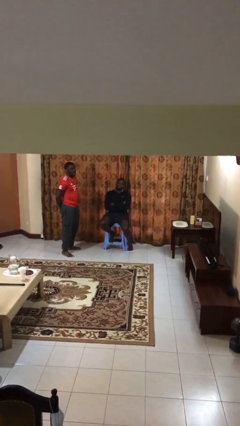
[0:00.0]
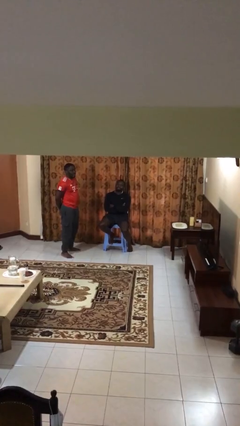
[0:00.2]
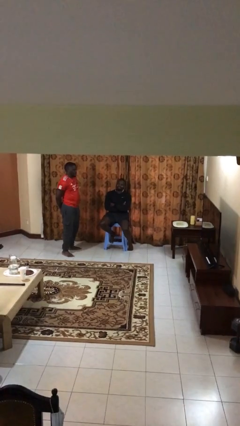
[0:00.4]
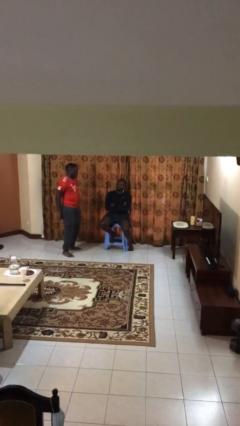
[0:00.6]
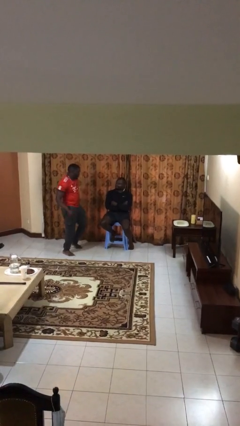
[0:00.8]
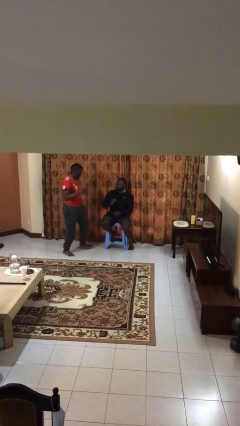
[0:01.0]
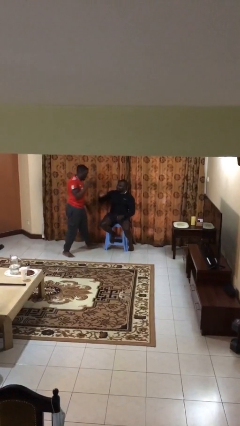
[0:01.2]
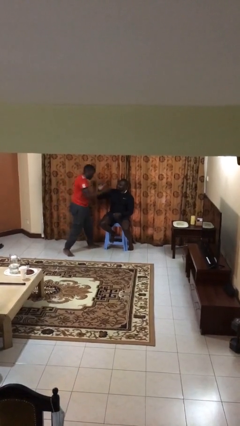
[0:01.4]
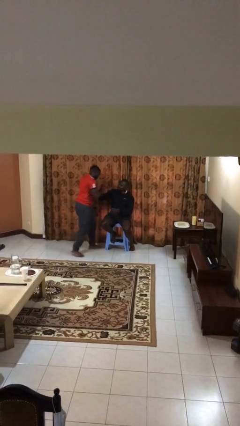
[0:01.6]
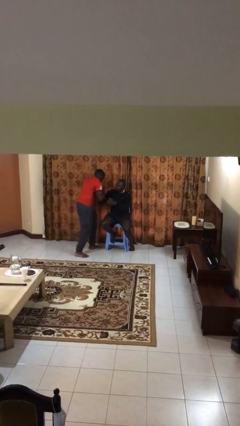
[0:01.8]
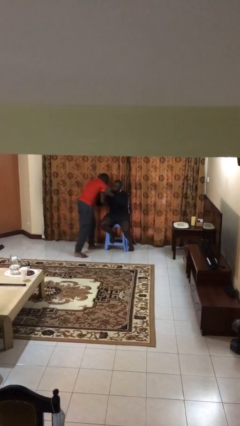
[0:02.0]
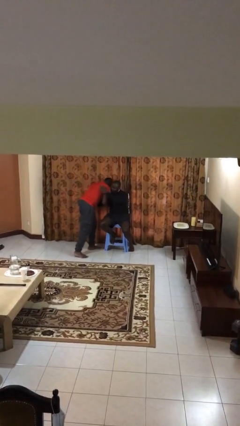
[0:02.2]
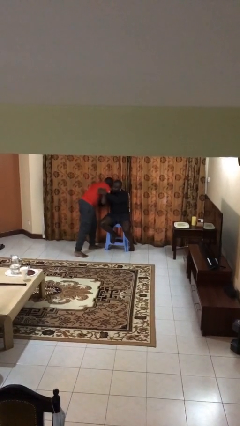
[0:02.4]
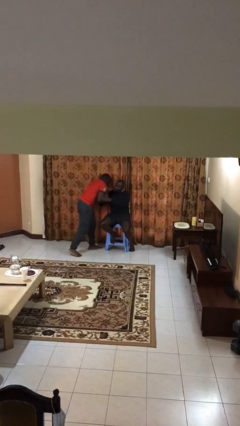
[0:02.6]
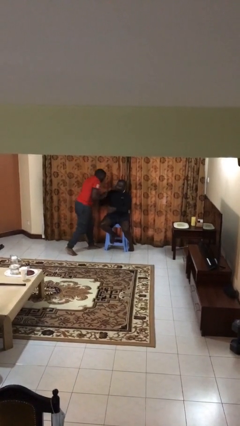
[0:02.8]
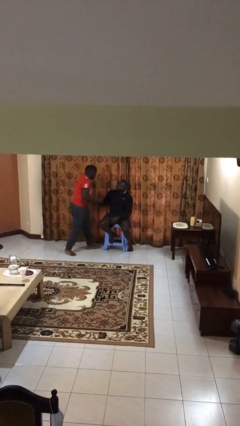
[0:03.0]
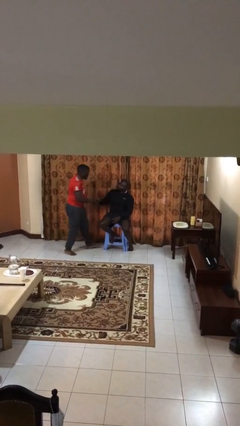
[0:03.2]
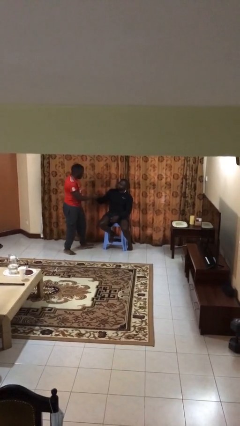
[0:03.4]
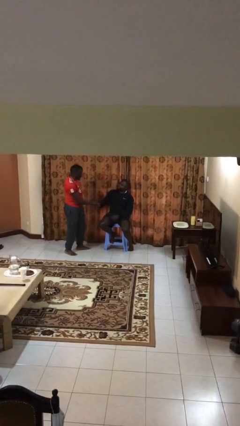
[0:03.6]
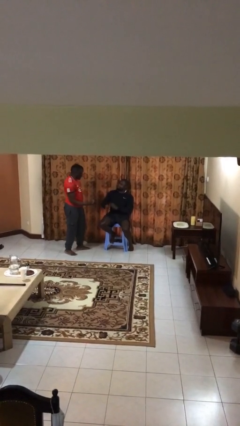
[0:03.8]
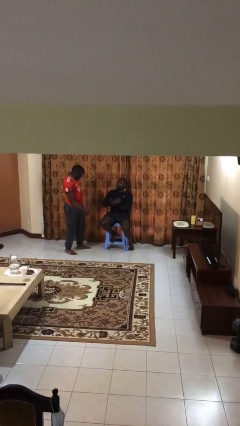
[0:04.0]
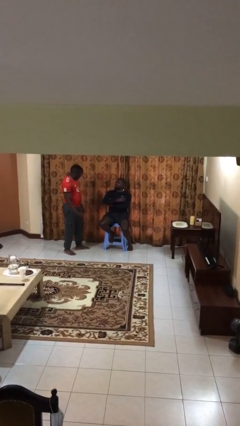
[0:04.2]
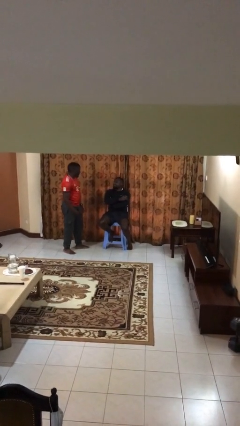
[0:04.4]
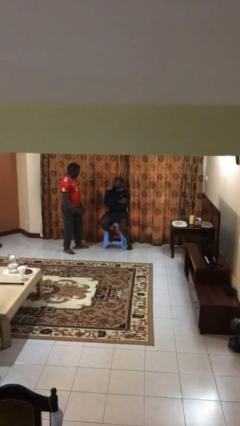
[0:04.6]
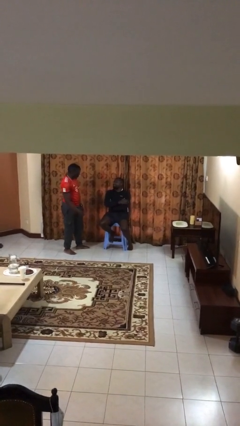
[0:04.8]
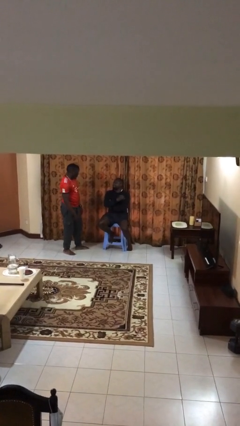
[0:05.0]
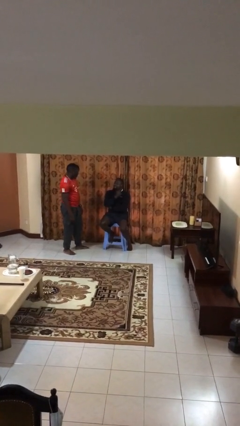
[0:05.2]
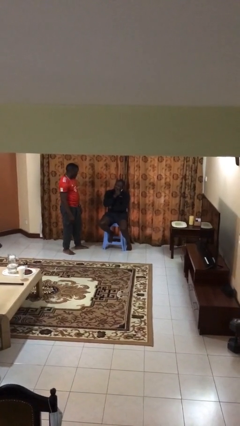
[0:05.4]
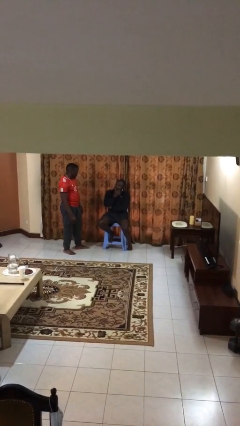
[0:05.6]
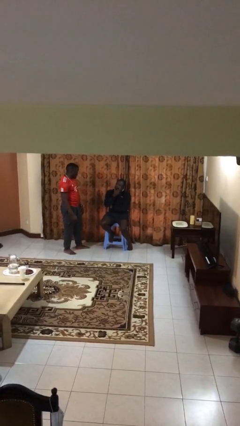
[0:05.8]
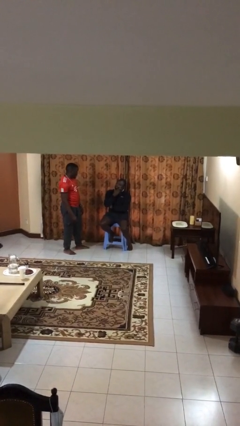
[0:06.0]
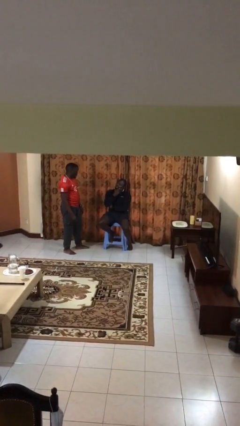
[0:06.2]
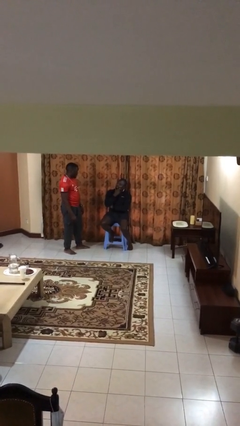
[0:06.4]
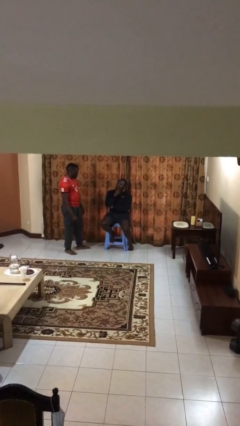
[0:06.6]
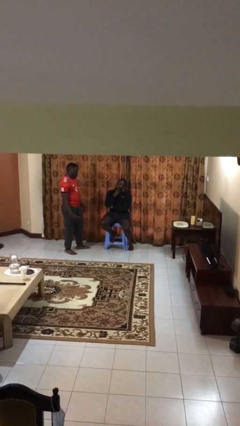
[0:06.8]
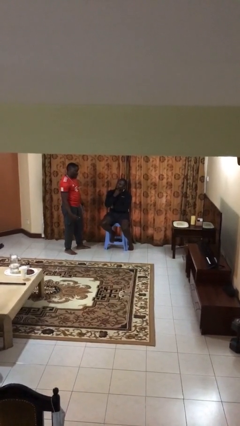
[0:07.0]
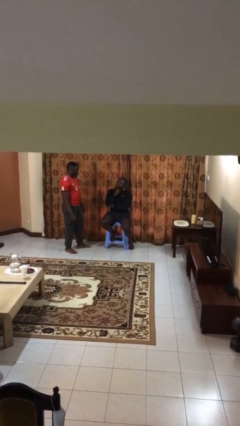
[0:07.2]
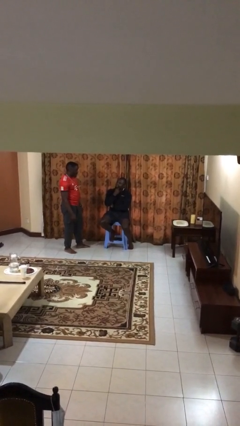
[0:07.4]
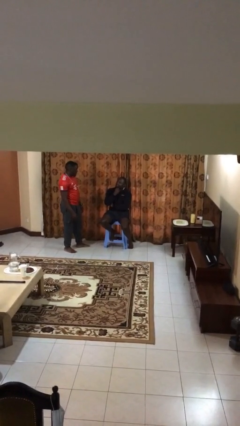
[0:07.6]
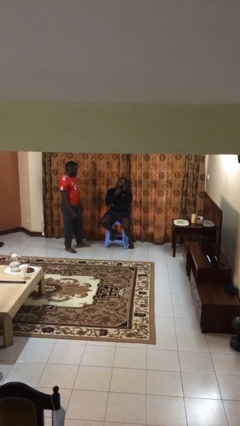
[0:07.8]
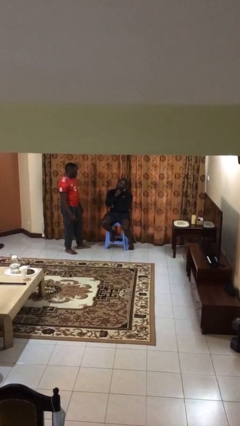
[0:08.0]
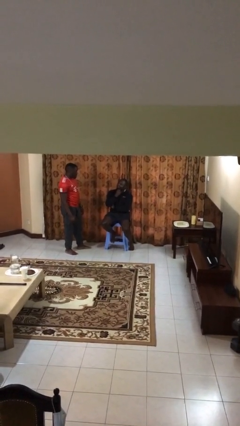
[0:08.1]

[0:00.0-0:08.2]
person embraces person

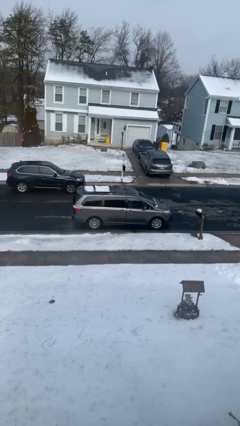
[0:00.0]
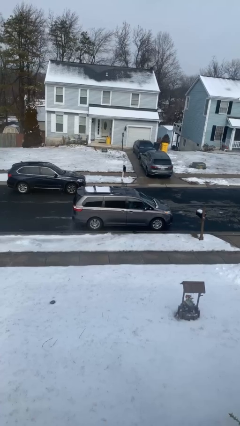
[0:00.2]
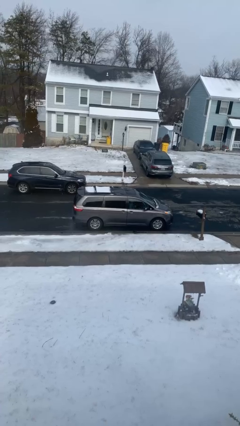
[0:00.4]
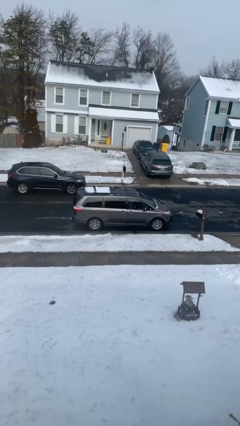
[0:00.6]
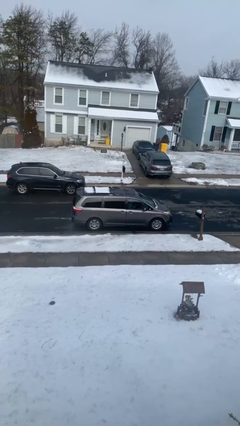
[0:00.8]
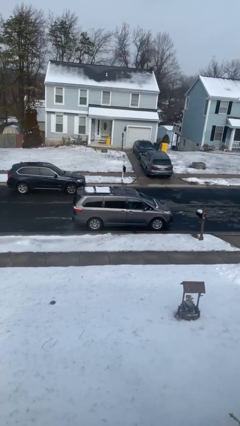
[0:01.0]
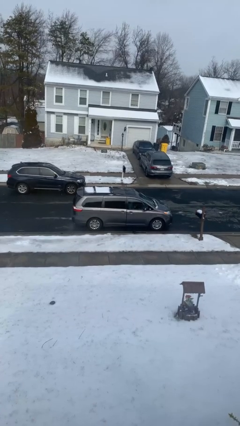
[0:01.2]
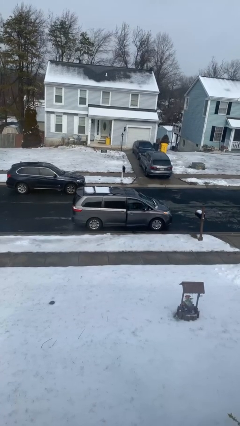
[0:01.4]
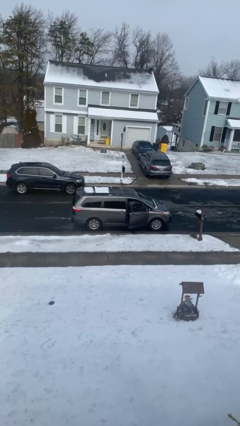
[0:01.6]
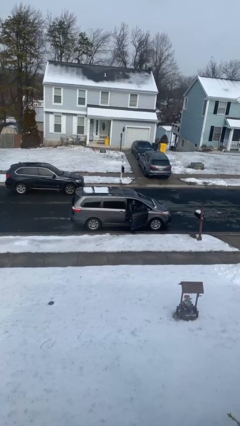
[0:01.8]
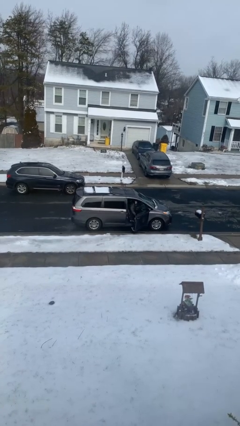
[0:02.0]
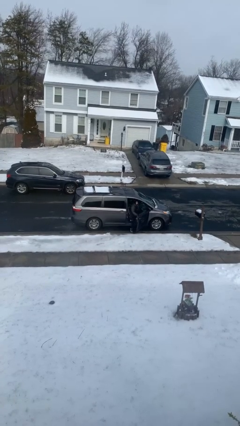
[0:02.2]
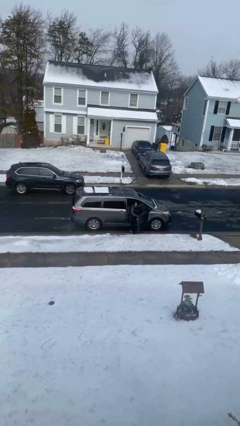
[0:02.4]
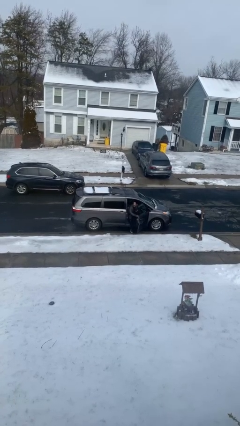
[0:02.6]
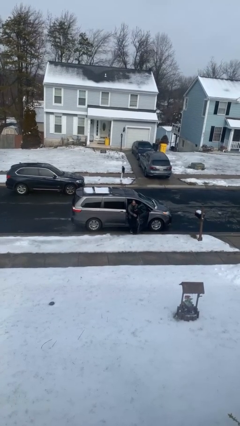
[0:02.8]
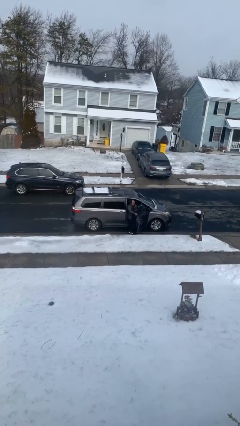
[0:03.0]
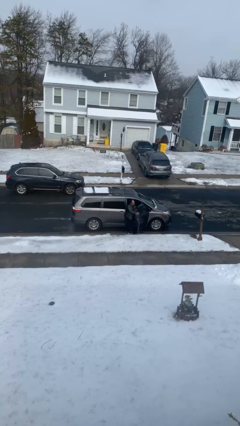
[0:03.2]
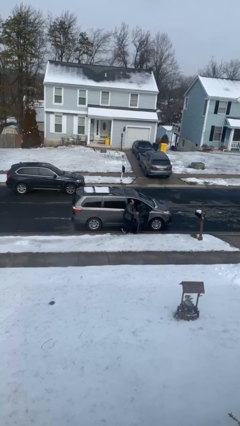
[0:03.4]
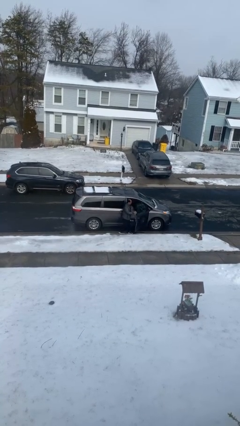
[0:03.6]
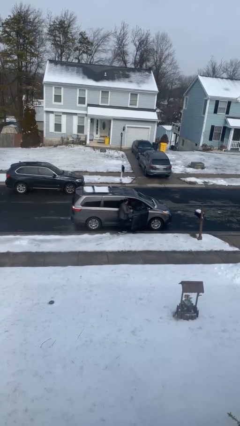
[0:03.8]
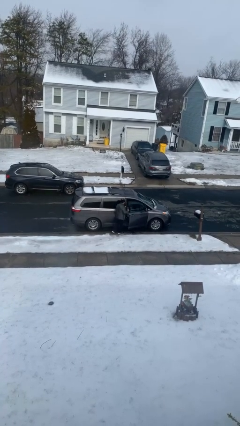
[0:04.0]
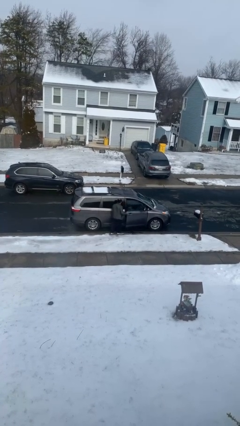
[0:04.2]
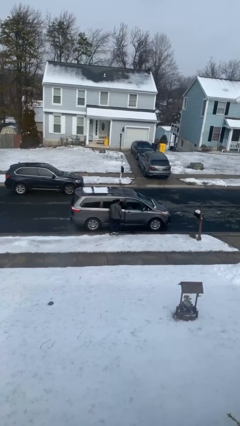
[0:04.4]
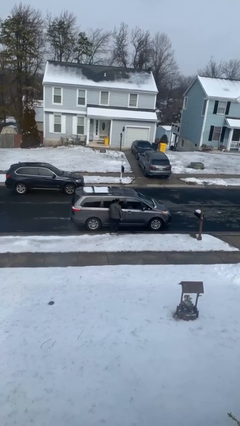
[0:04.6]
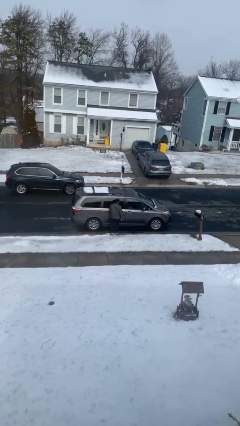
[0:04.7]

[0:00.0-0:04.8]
car drops off person

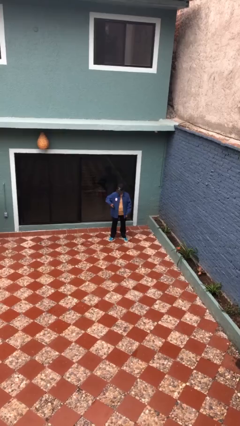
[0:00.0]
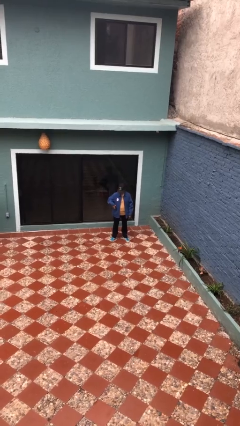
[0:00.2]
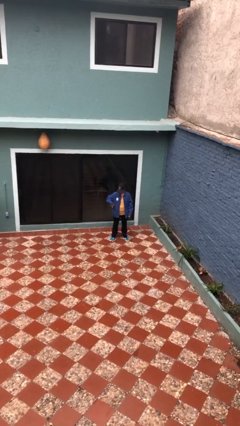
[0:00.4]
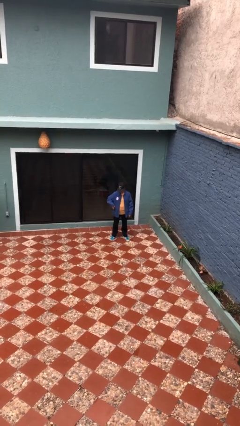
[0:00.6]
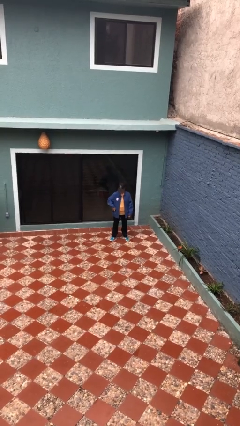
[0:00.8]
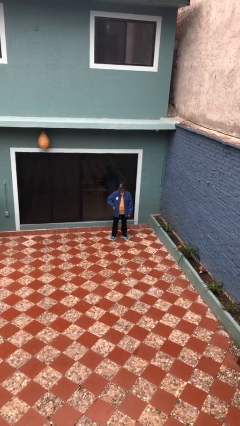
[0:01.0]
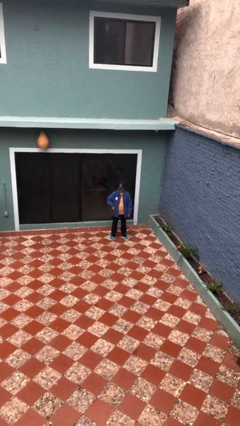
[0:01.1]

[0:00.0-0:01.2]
person puts phone into pocket

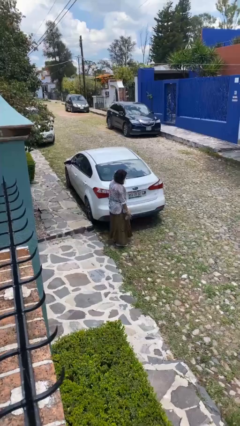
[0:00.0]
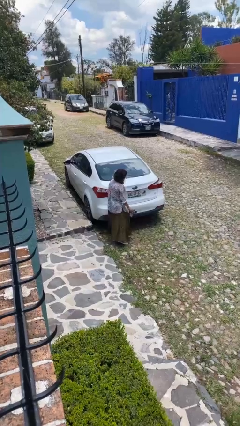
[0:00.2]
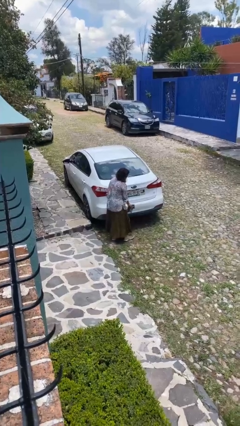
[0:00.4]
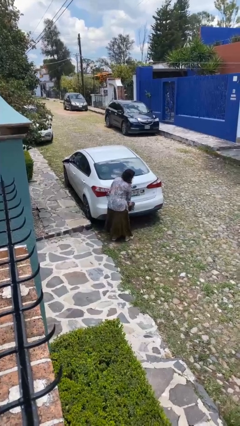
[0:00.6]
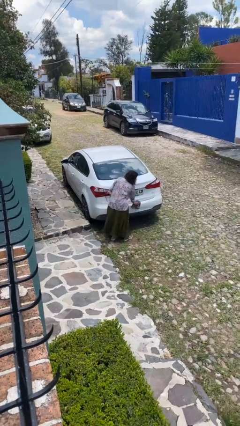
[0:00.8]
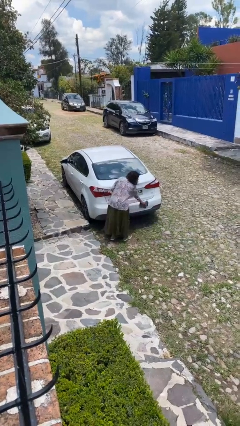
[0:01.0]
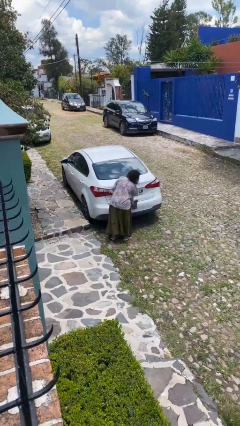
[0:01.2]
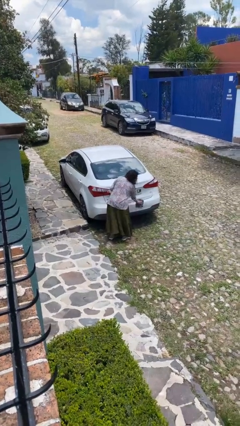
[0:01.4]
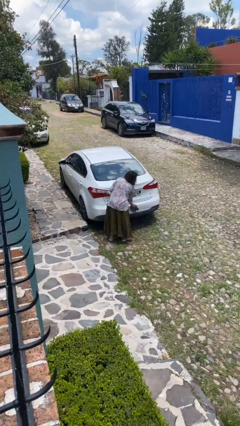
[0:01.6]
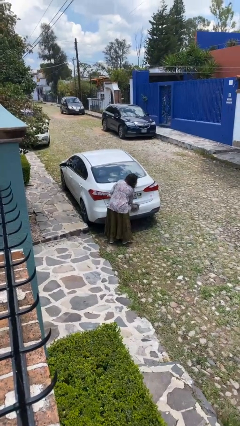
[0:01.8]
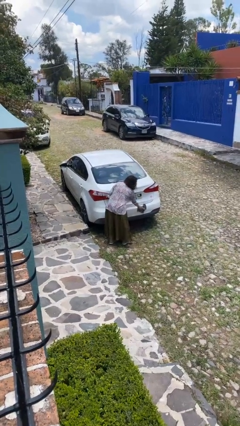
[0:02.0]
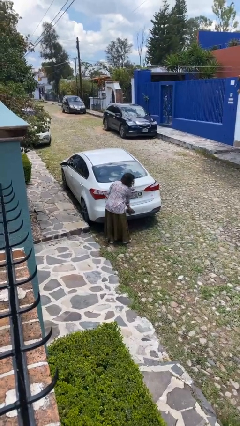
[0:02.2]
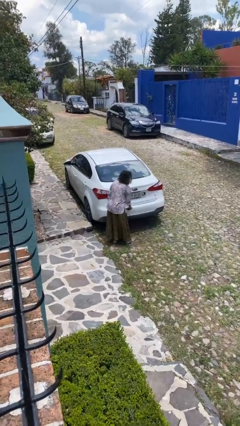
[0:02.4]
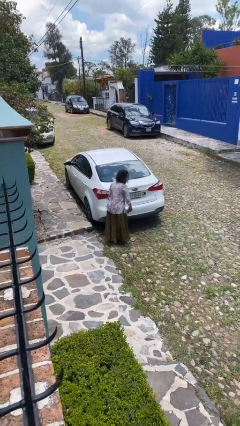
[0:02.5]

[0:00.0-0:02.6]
person polishes car with rag

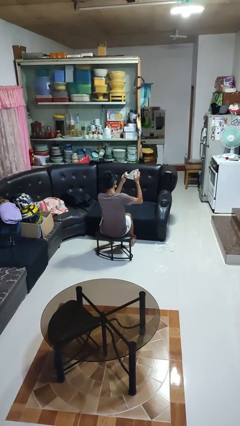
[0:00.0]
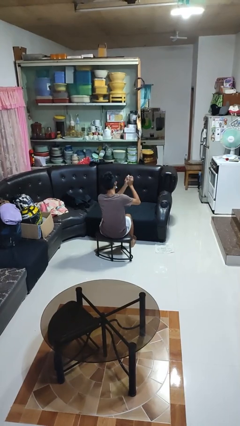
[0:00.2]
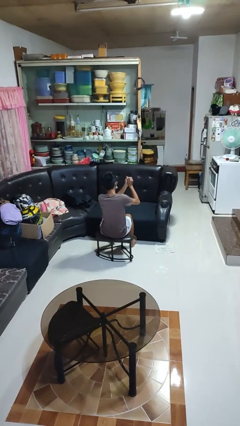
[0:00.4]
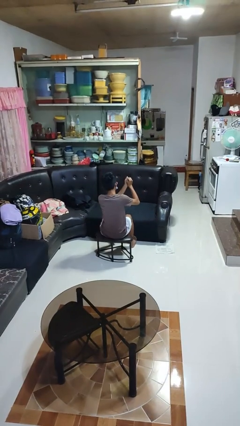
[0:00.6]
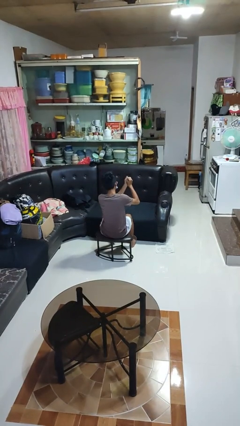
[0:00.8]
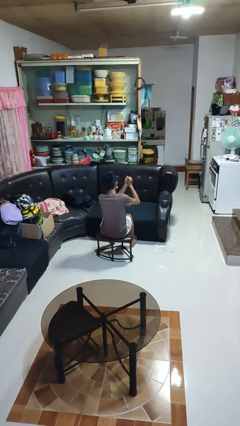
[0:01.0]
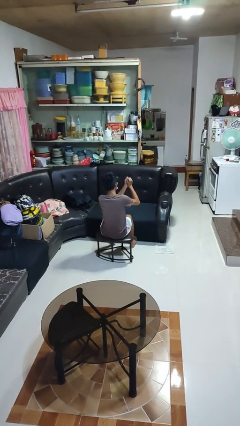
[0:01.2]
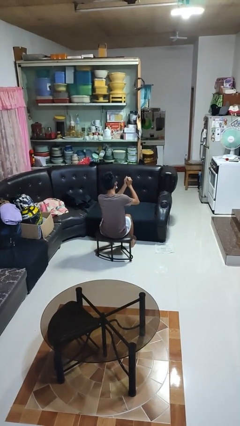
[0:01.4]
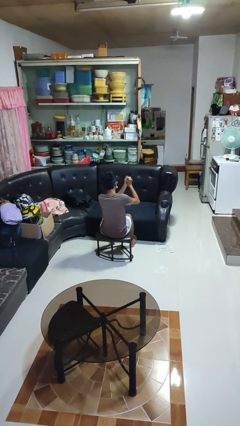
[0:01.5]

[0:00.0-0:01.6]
person crumples paper
